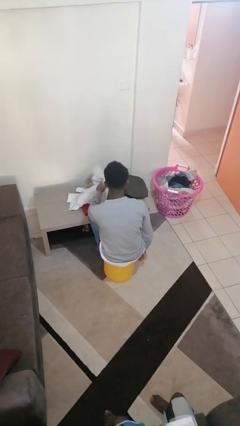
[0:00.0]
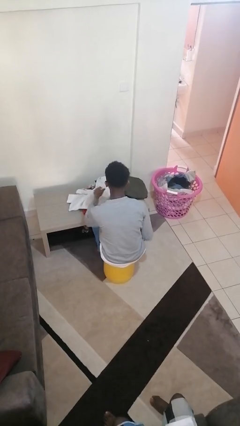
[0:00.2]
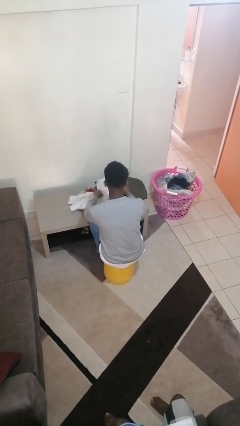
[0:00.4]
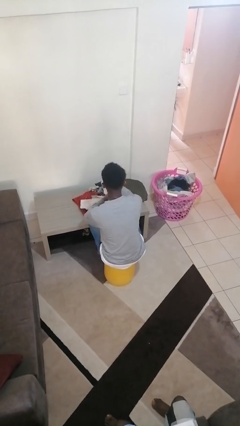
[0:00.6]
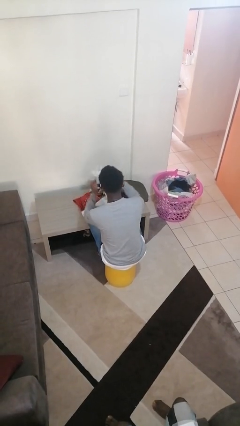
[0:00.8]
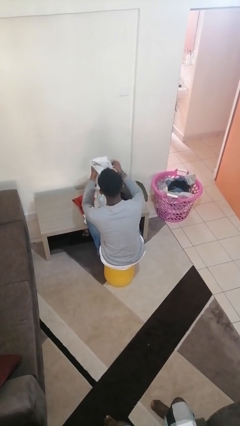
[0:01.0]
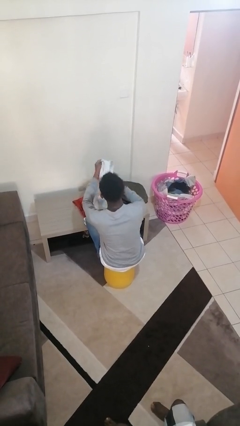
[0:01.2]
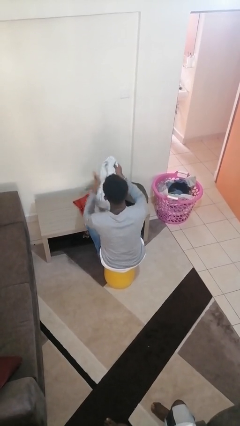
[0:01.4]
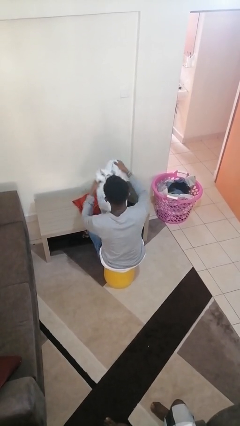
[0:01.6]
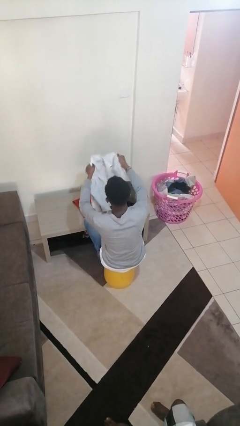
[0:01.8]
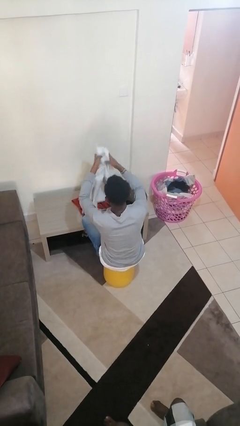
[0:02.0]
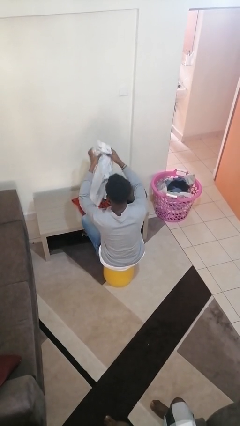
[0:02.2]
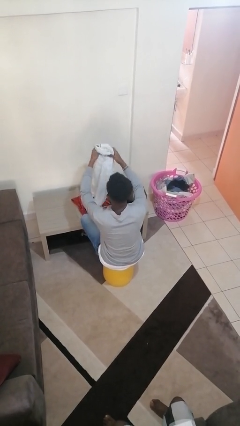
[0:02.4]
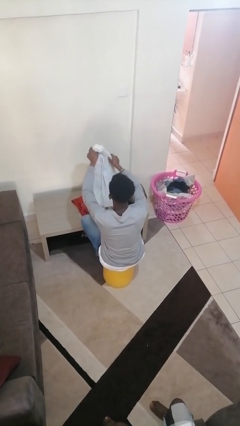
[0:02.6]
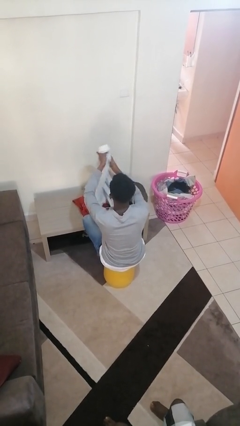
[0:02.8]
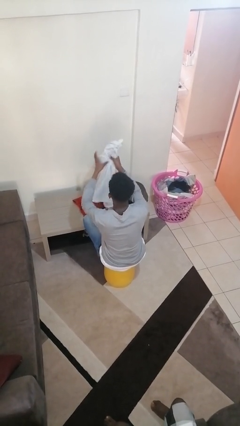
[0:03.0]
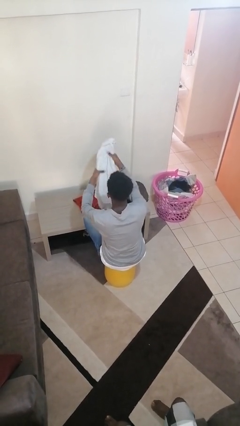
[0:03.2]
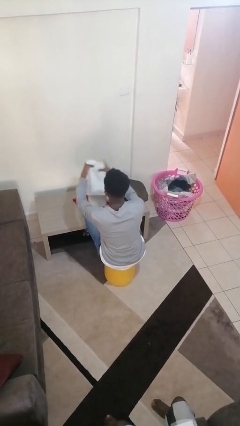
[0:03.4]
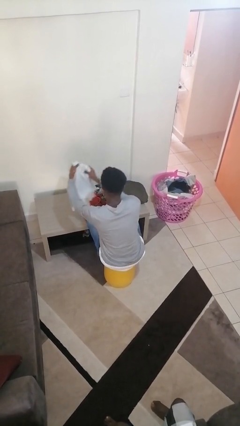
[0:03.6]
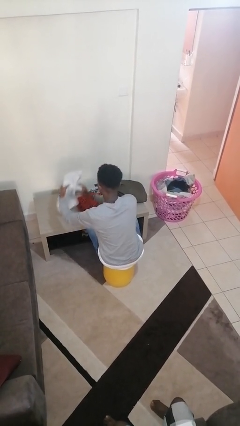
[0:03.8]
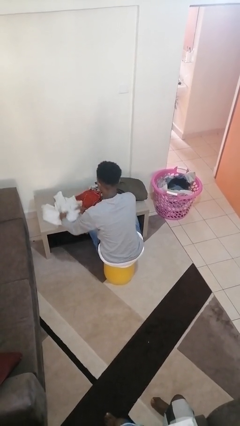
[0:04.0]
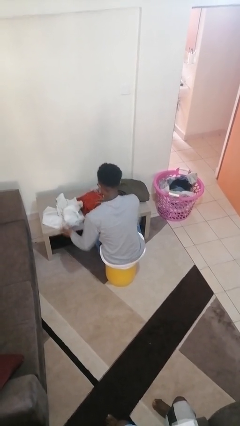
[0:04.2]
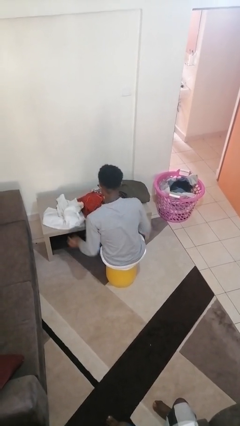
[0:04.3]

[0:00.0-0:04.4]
person folds shirt

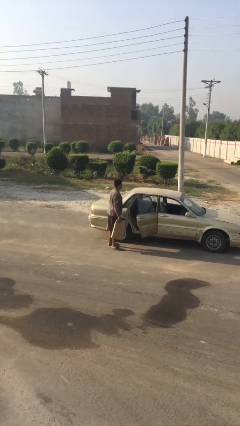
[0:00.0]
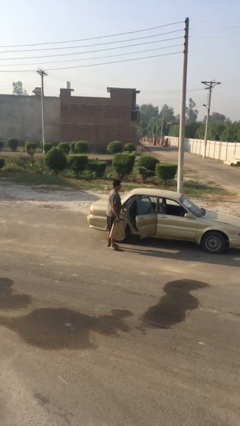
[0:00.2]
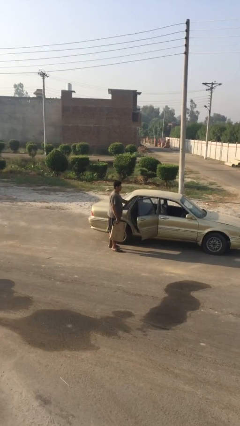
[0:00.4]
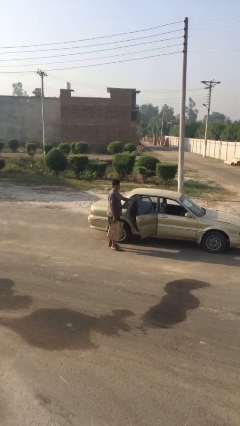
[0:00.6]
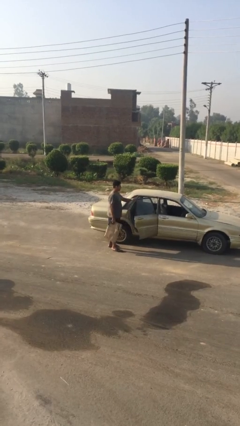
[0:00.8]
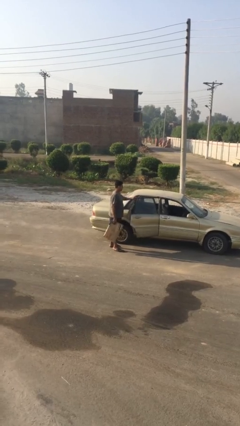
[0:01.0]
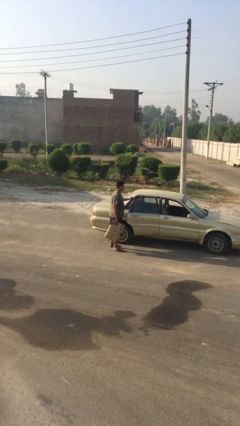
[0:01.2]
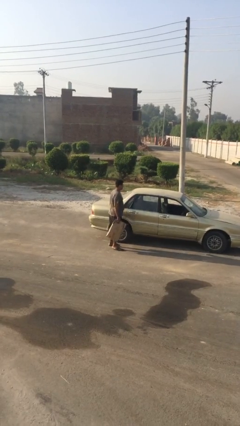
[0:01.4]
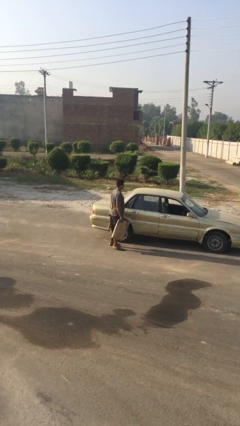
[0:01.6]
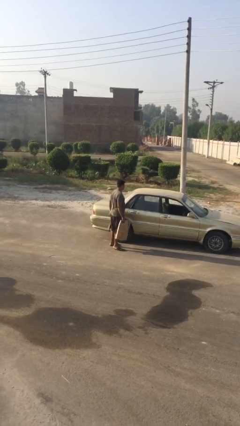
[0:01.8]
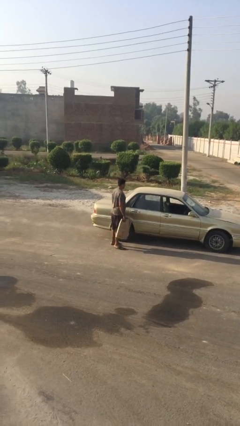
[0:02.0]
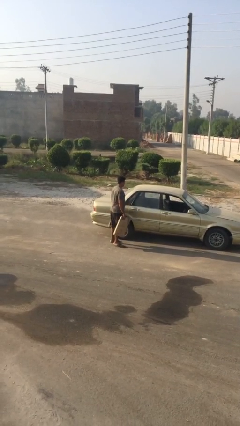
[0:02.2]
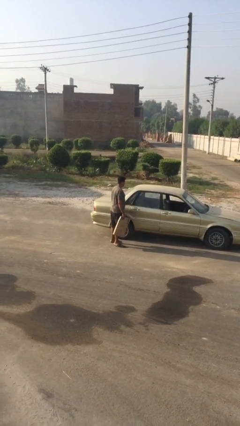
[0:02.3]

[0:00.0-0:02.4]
person closes car door

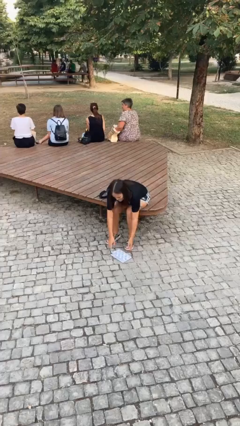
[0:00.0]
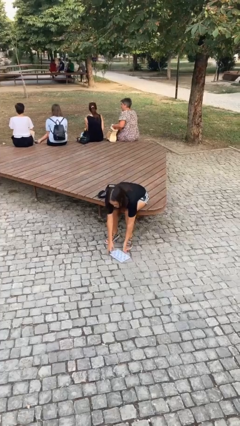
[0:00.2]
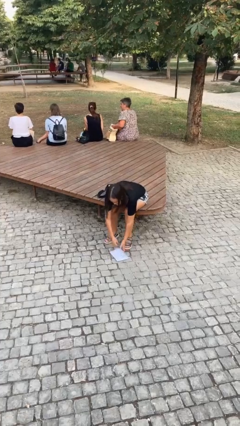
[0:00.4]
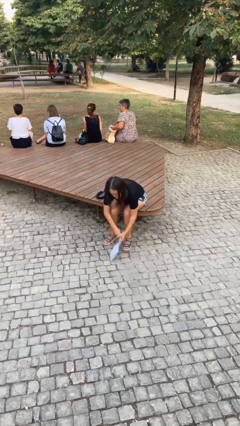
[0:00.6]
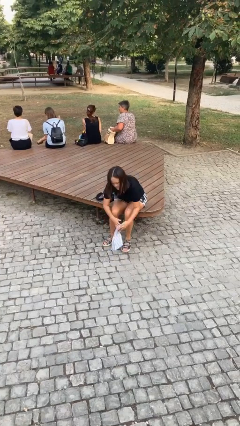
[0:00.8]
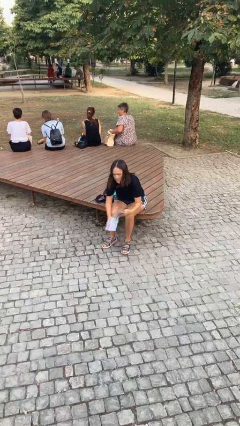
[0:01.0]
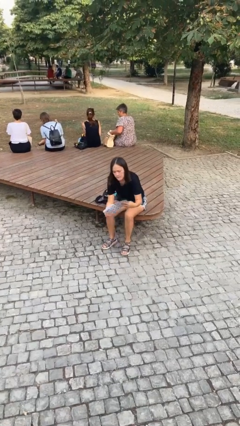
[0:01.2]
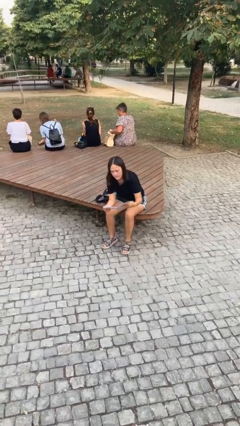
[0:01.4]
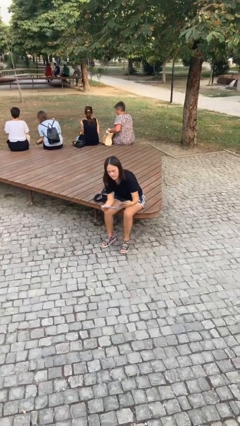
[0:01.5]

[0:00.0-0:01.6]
person picks up object from floor

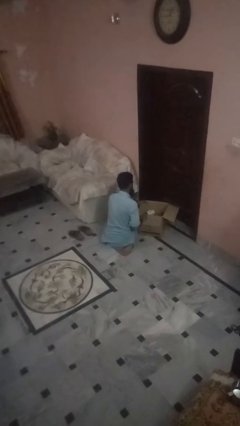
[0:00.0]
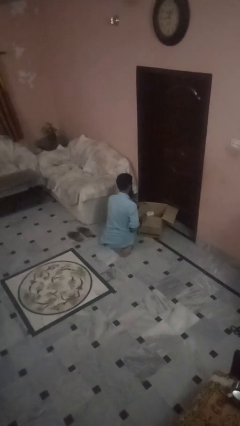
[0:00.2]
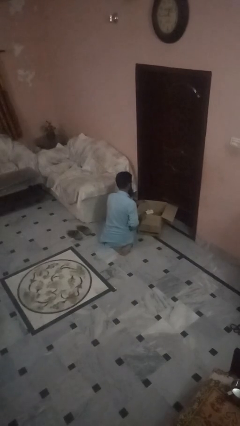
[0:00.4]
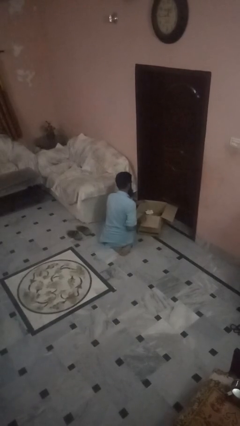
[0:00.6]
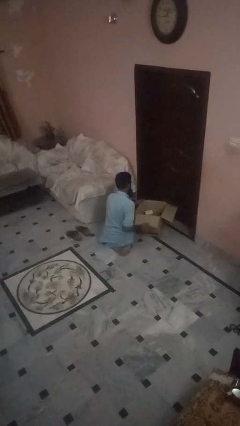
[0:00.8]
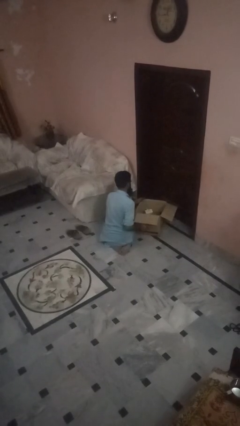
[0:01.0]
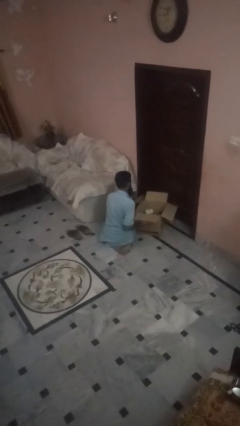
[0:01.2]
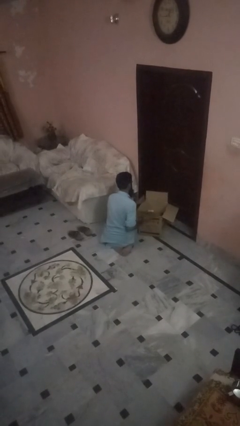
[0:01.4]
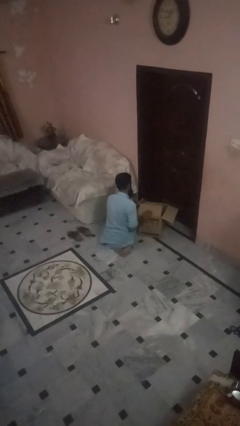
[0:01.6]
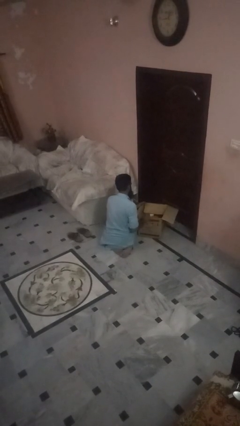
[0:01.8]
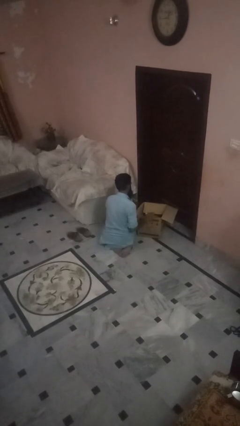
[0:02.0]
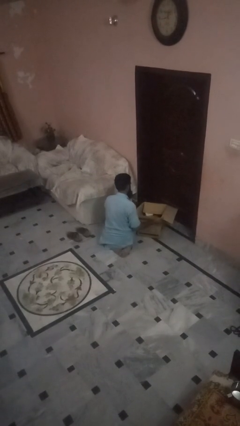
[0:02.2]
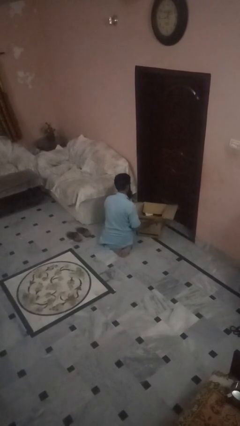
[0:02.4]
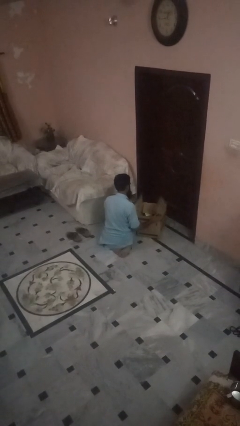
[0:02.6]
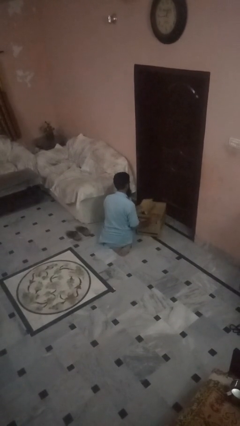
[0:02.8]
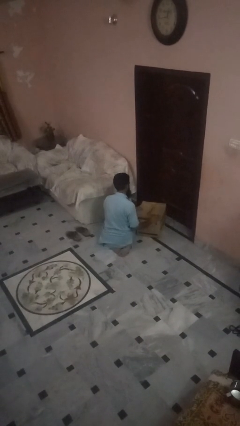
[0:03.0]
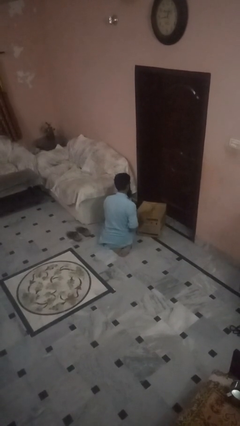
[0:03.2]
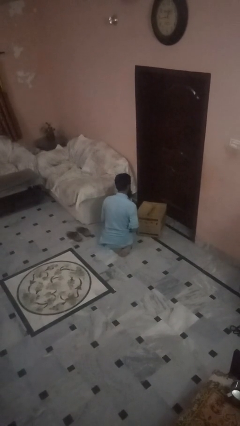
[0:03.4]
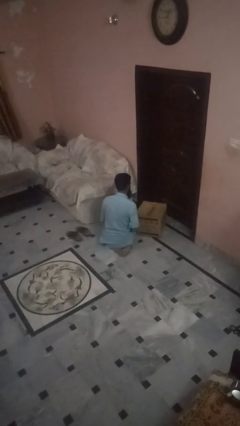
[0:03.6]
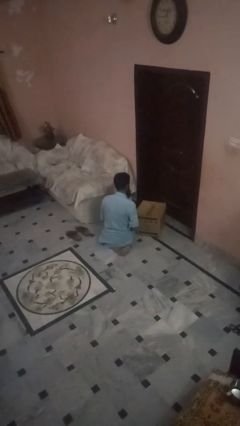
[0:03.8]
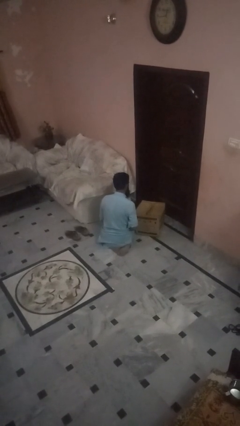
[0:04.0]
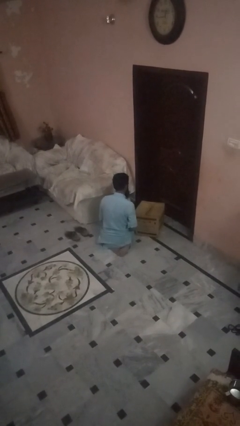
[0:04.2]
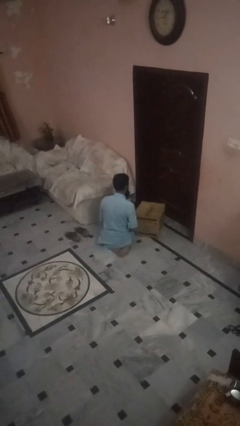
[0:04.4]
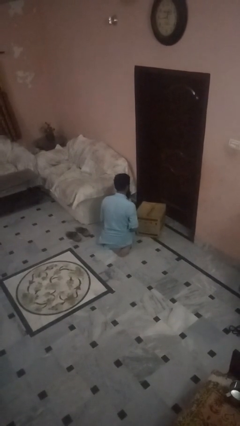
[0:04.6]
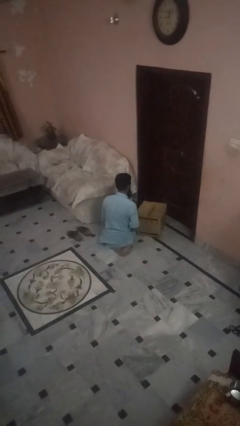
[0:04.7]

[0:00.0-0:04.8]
person closes box

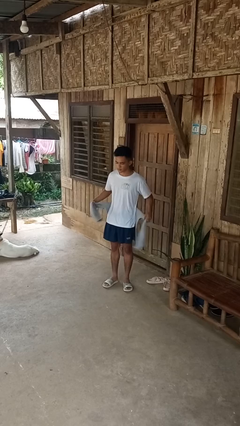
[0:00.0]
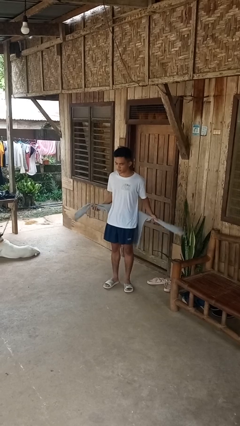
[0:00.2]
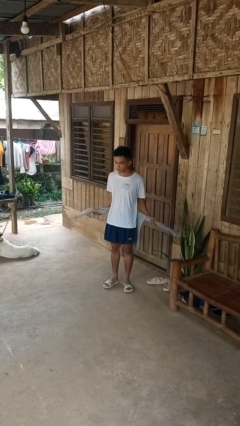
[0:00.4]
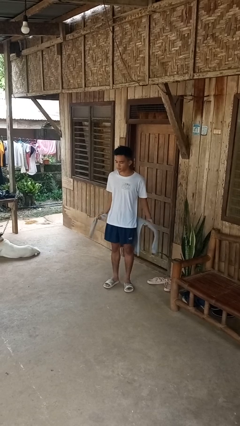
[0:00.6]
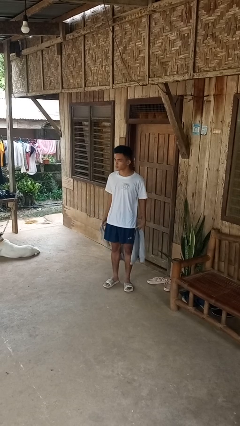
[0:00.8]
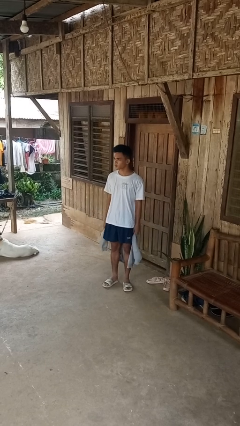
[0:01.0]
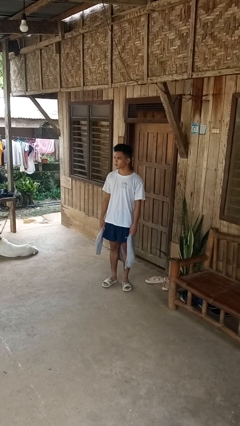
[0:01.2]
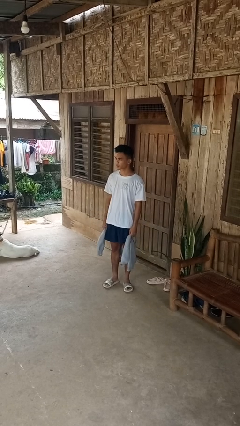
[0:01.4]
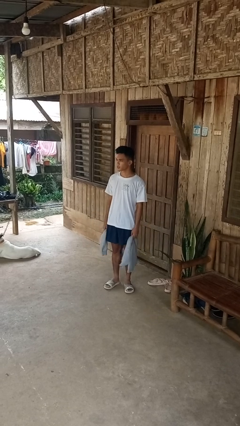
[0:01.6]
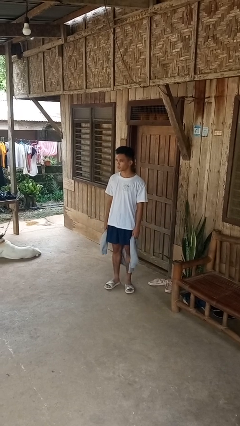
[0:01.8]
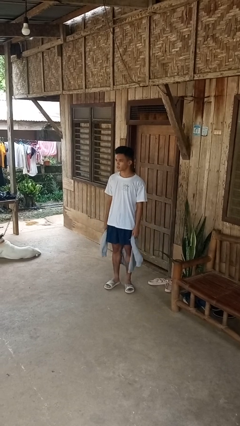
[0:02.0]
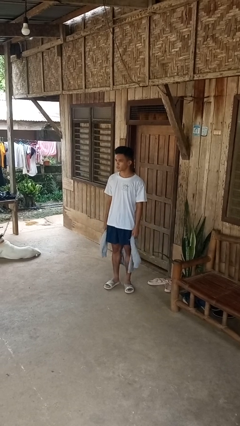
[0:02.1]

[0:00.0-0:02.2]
person unties jacket around waist

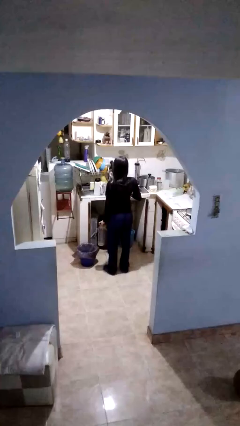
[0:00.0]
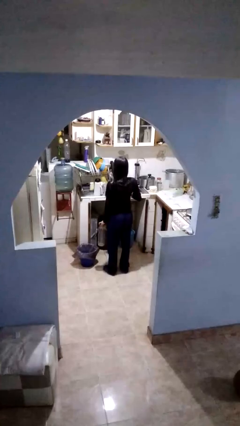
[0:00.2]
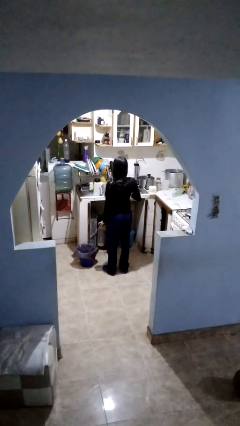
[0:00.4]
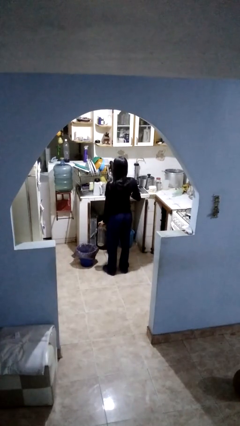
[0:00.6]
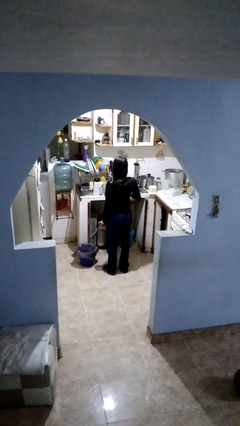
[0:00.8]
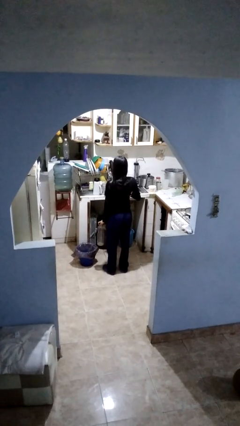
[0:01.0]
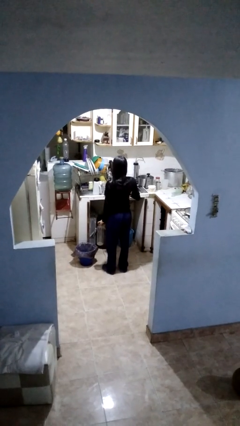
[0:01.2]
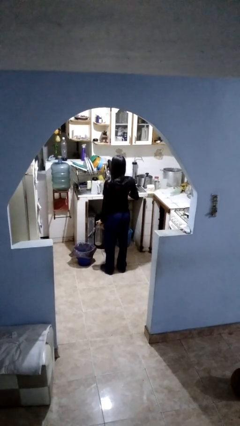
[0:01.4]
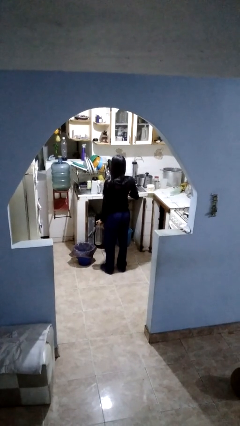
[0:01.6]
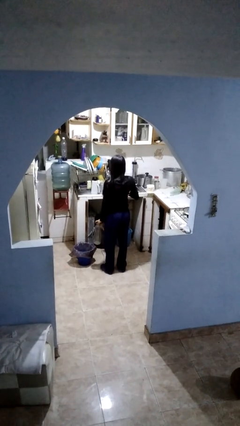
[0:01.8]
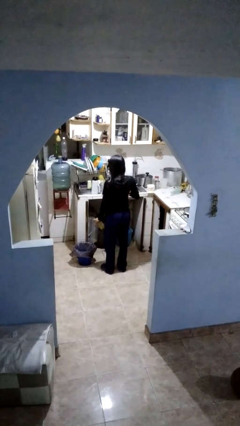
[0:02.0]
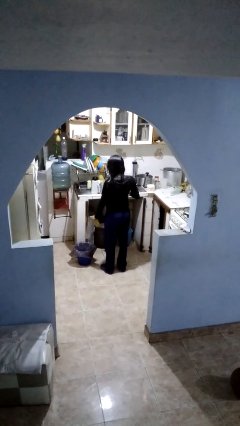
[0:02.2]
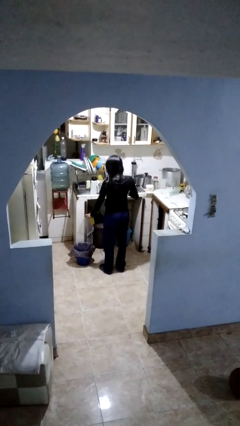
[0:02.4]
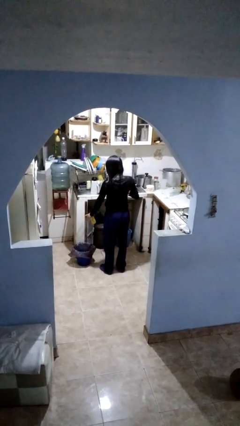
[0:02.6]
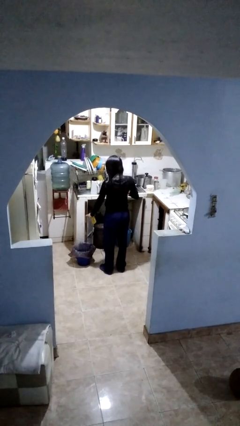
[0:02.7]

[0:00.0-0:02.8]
person discards trash
